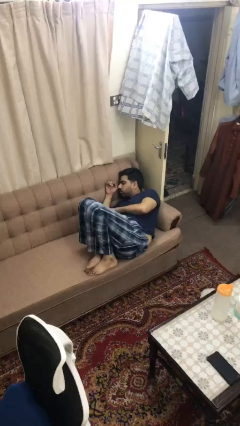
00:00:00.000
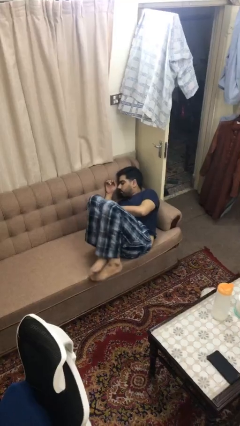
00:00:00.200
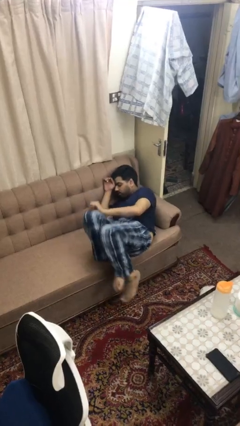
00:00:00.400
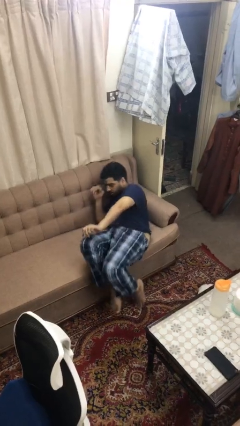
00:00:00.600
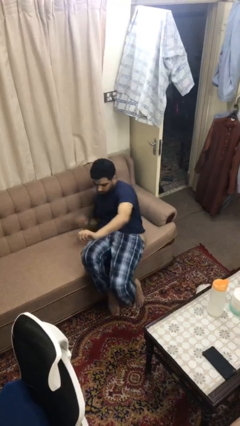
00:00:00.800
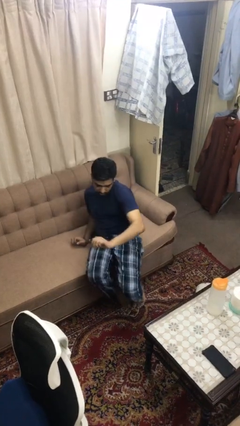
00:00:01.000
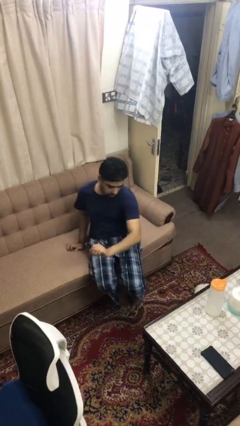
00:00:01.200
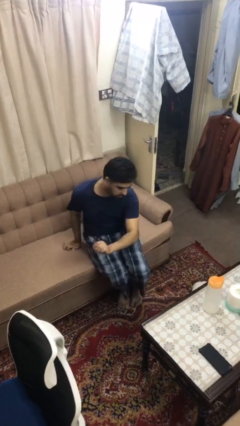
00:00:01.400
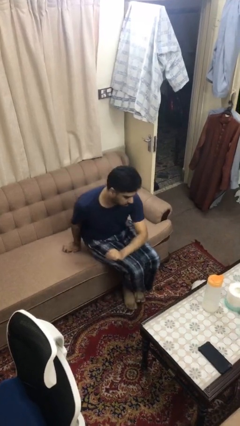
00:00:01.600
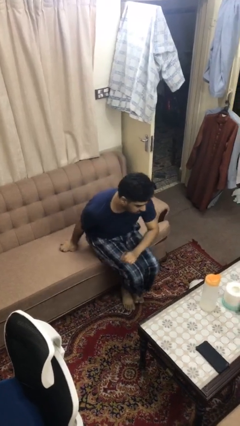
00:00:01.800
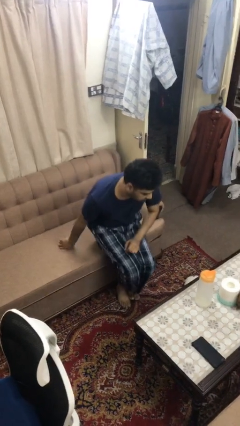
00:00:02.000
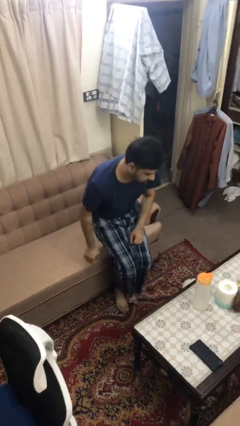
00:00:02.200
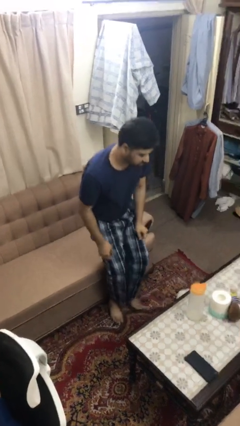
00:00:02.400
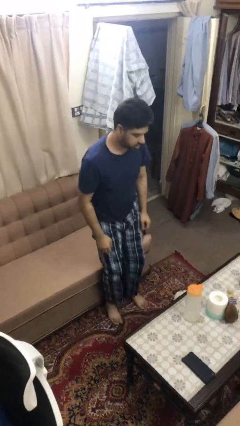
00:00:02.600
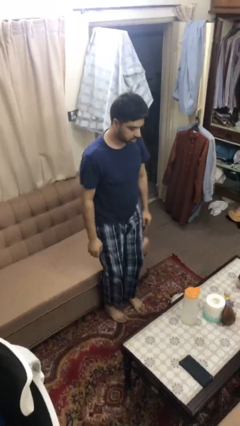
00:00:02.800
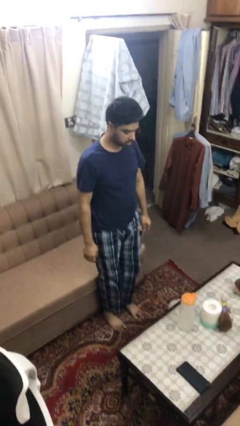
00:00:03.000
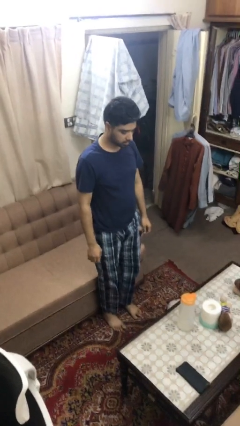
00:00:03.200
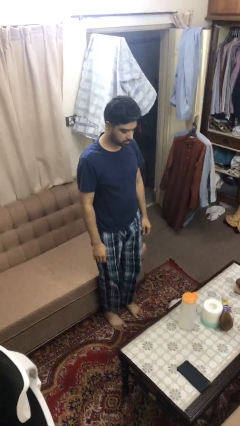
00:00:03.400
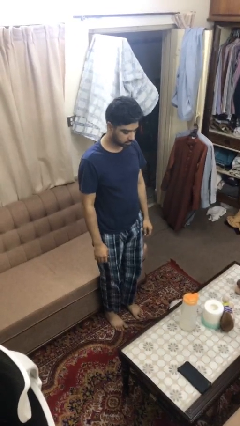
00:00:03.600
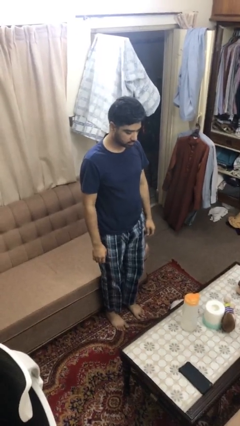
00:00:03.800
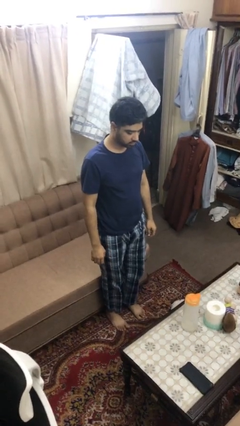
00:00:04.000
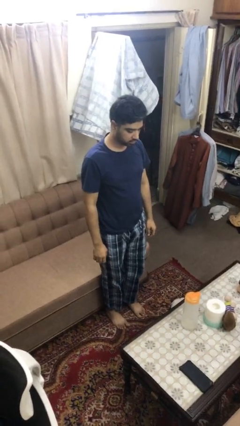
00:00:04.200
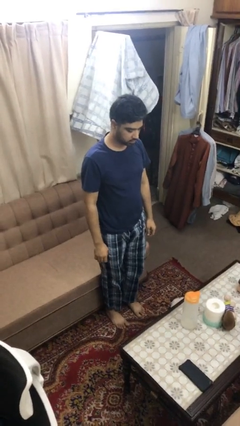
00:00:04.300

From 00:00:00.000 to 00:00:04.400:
person stands up

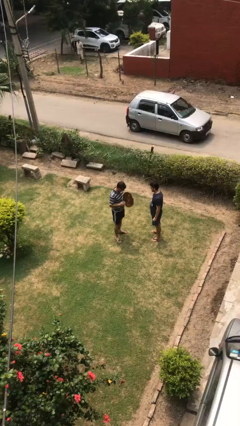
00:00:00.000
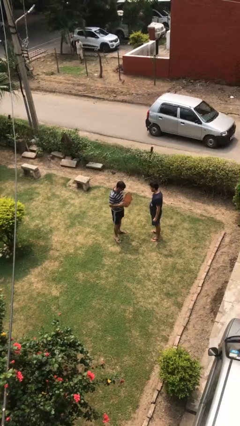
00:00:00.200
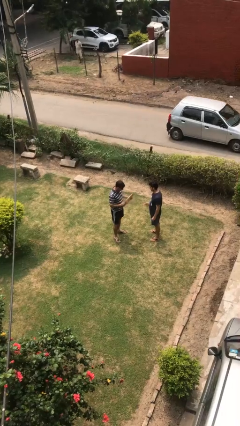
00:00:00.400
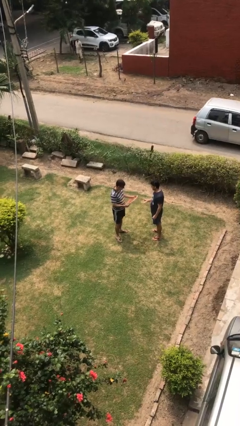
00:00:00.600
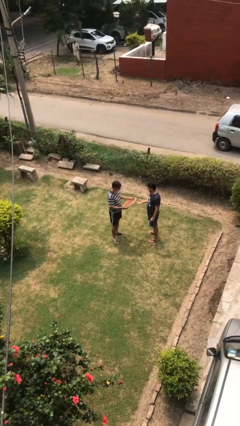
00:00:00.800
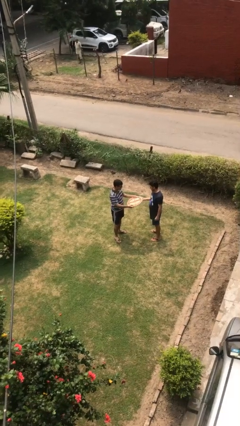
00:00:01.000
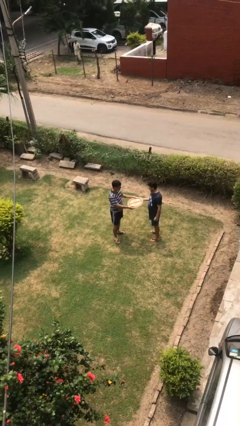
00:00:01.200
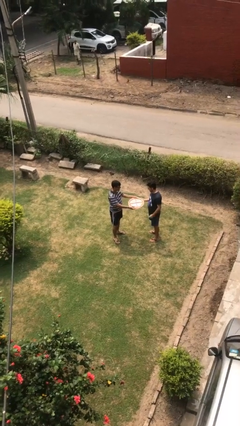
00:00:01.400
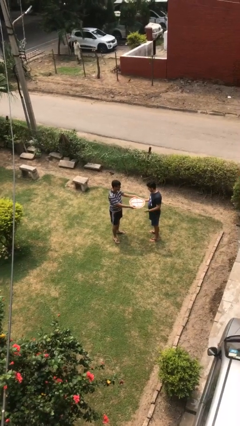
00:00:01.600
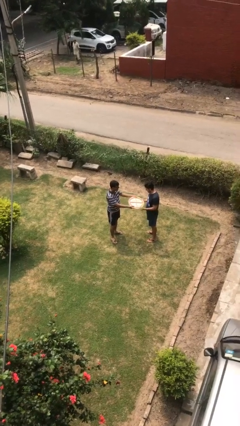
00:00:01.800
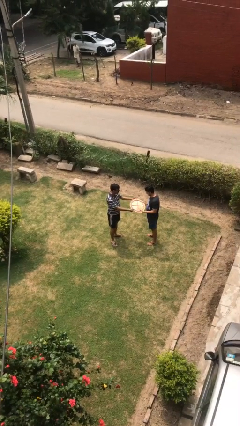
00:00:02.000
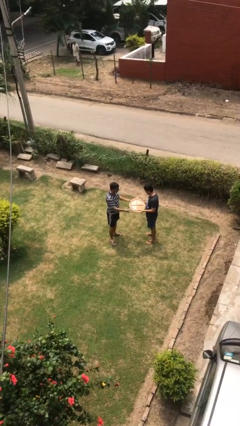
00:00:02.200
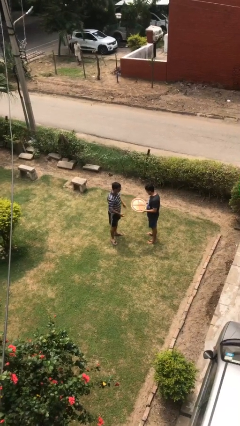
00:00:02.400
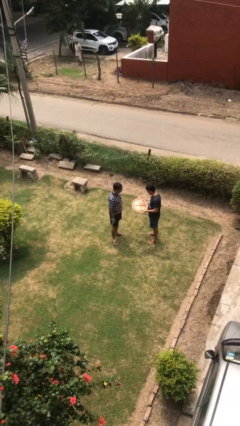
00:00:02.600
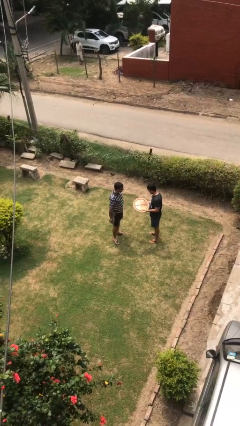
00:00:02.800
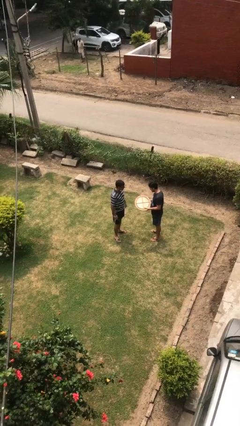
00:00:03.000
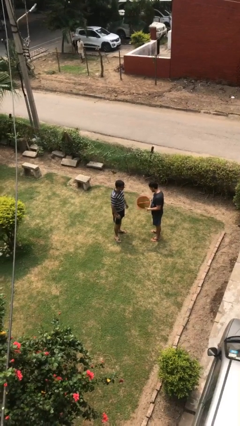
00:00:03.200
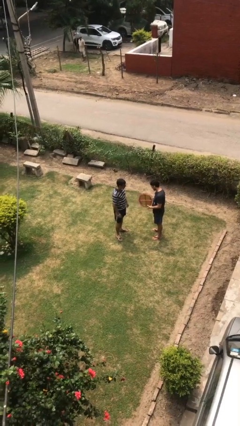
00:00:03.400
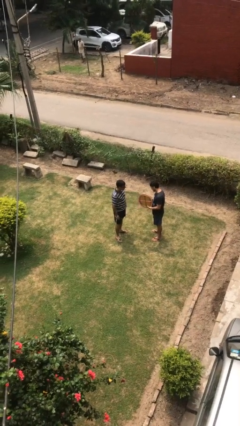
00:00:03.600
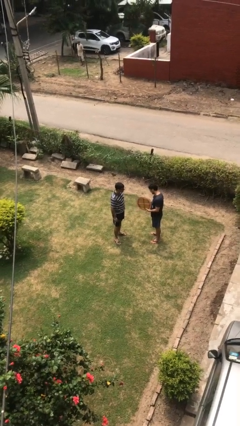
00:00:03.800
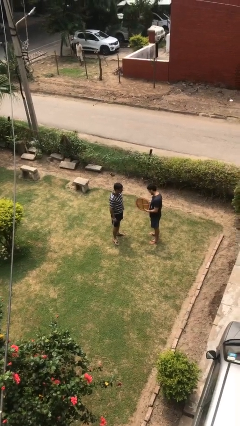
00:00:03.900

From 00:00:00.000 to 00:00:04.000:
person transfers object to person

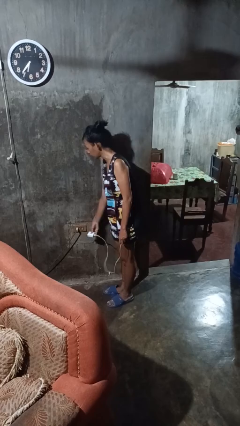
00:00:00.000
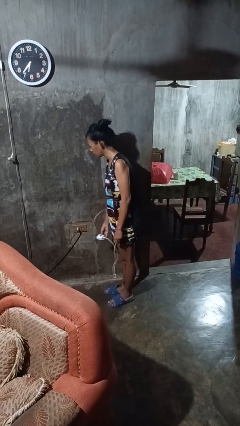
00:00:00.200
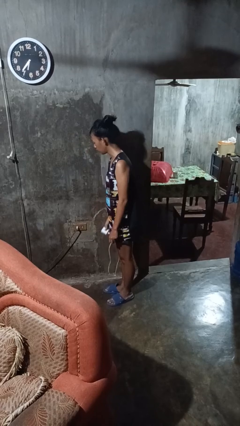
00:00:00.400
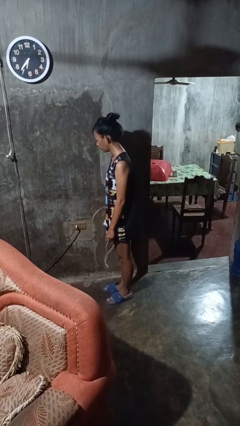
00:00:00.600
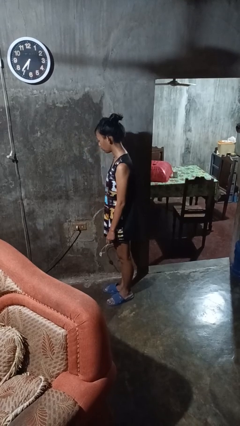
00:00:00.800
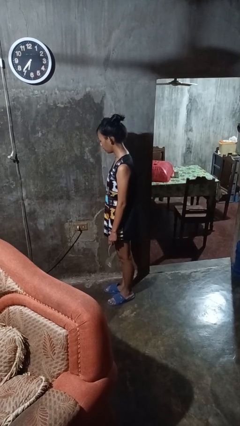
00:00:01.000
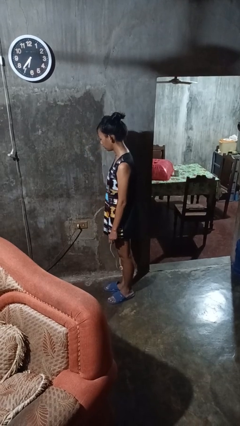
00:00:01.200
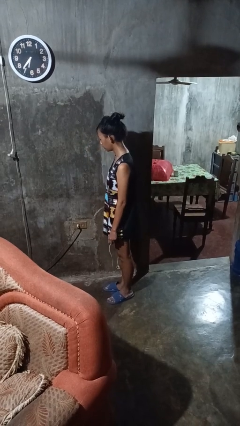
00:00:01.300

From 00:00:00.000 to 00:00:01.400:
person unplugs from electrical socket

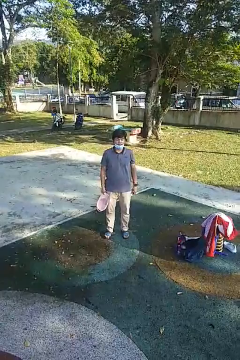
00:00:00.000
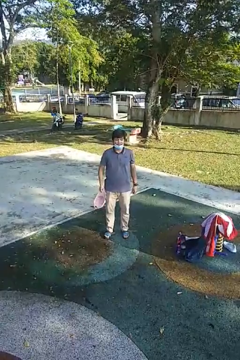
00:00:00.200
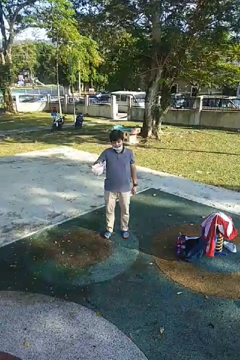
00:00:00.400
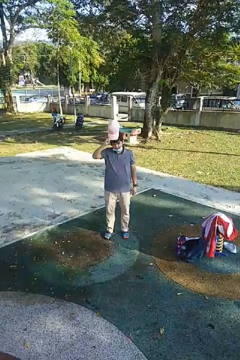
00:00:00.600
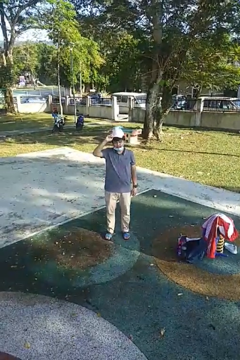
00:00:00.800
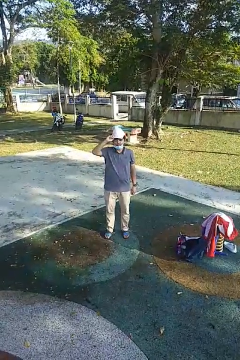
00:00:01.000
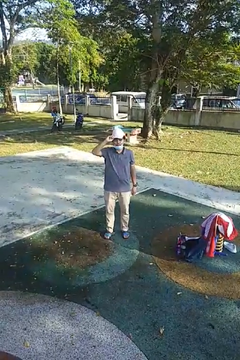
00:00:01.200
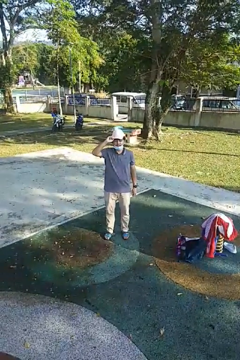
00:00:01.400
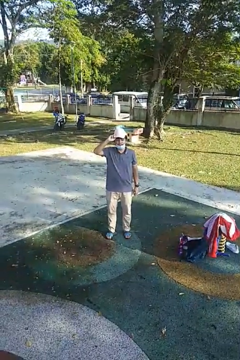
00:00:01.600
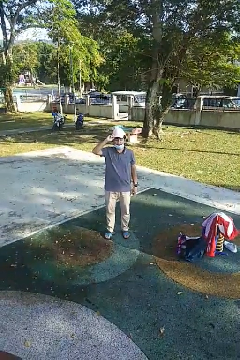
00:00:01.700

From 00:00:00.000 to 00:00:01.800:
person puts on hat

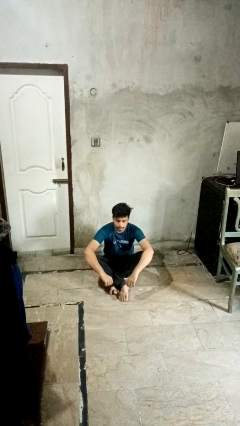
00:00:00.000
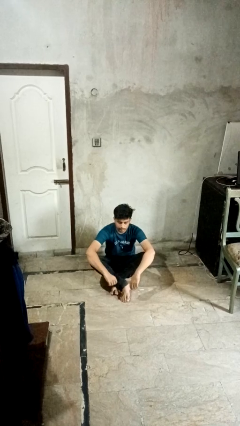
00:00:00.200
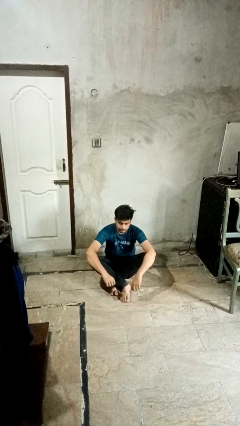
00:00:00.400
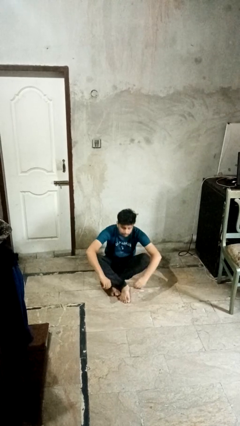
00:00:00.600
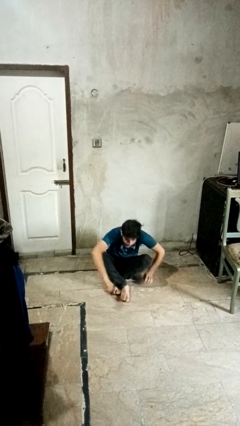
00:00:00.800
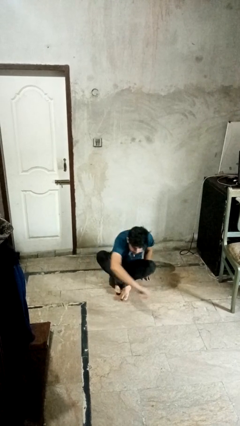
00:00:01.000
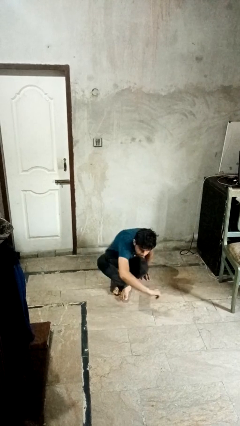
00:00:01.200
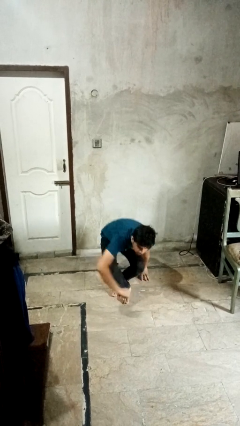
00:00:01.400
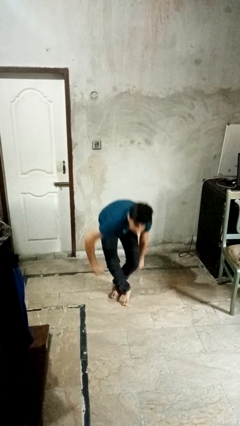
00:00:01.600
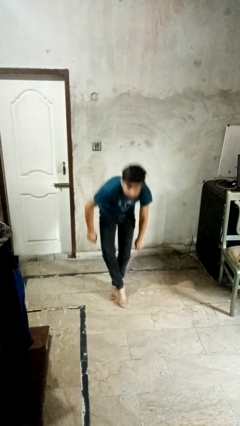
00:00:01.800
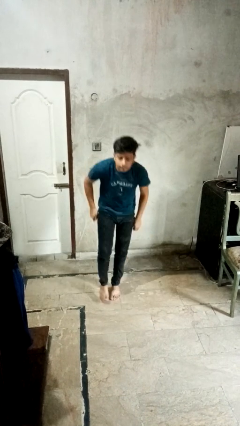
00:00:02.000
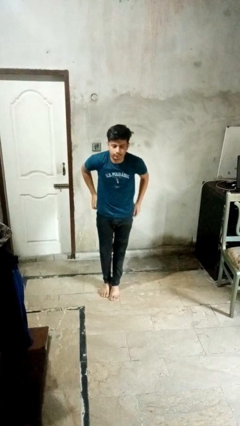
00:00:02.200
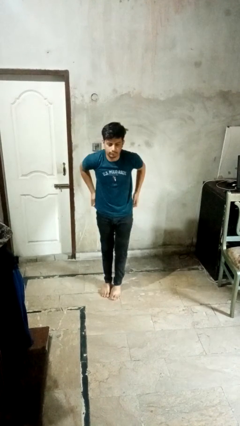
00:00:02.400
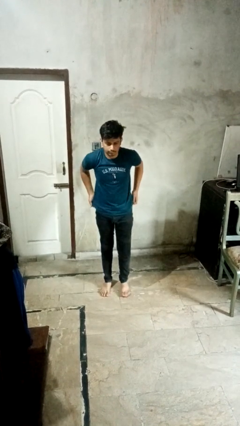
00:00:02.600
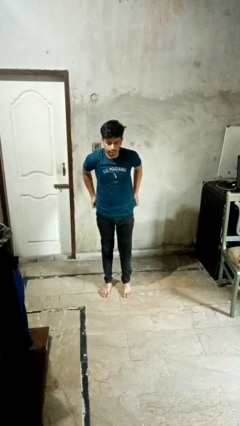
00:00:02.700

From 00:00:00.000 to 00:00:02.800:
person stands up from floor

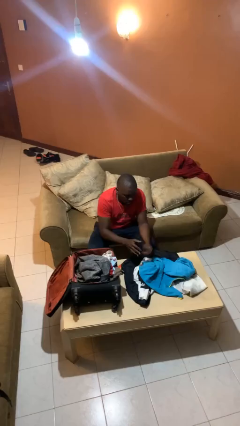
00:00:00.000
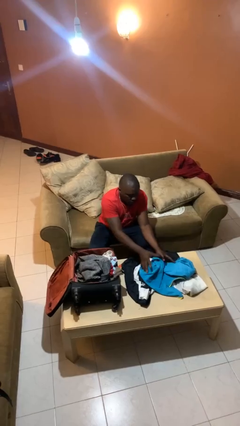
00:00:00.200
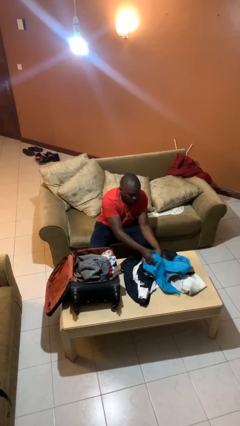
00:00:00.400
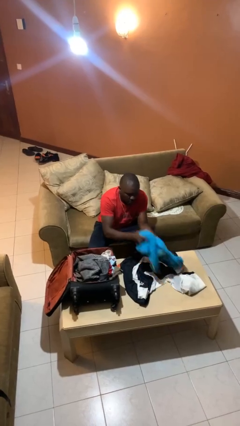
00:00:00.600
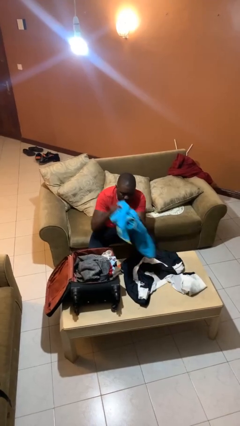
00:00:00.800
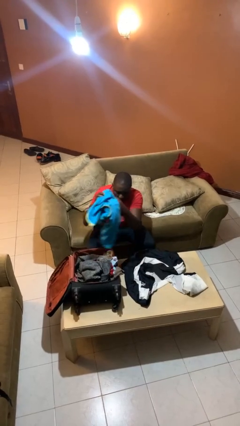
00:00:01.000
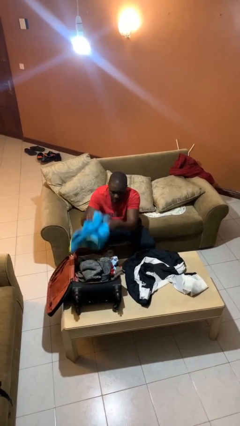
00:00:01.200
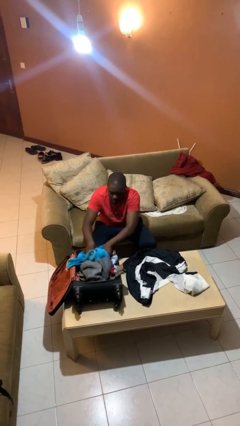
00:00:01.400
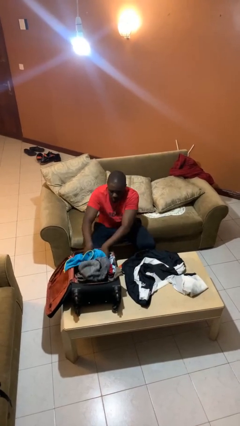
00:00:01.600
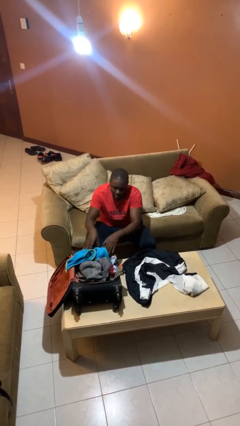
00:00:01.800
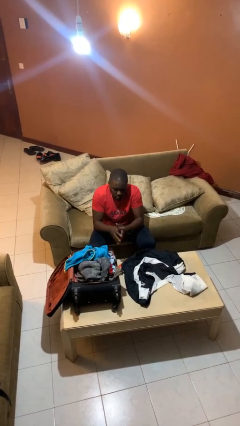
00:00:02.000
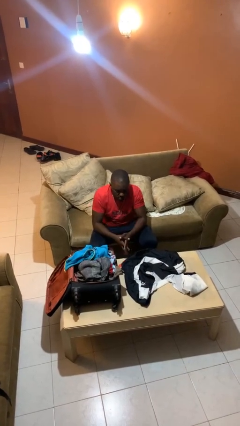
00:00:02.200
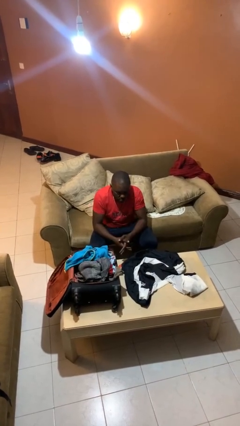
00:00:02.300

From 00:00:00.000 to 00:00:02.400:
person loads clothes into suitcase

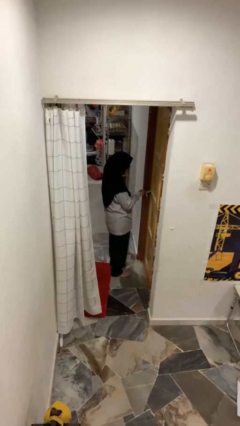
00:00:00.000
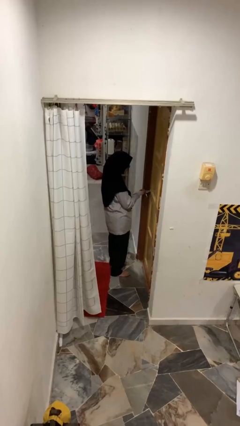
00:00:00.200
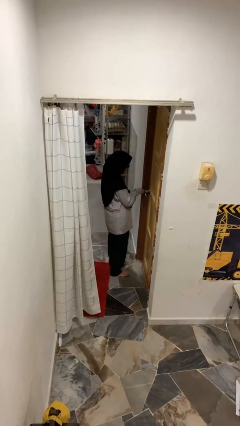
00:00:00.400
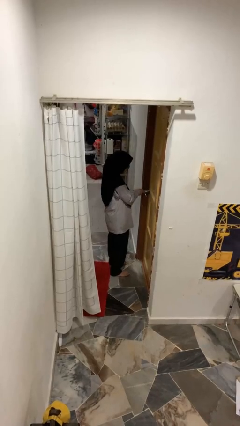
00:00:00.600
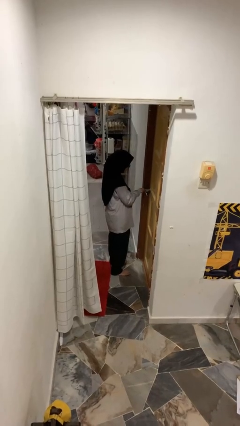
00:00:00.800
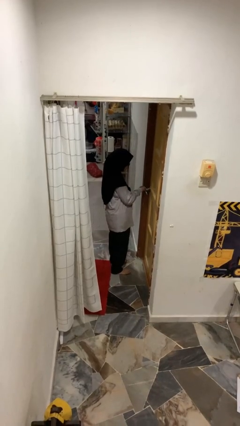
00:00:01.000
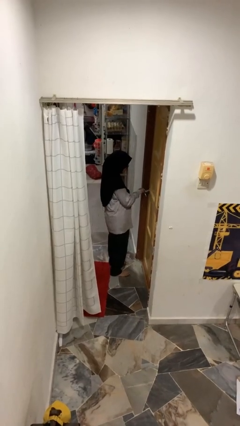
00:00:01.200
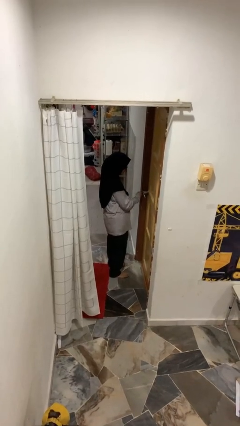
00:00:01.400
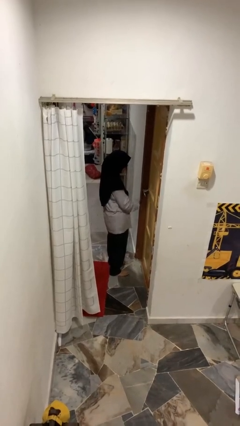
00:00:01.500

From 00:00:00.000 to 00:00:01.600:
person locks door with keys
